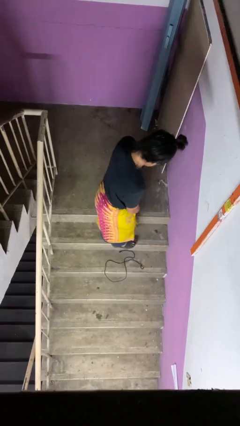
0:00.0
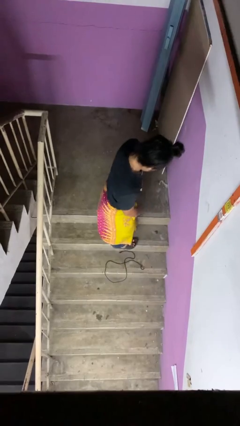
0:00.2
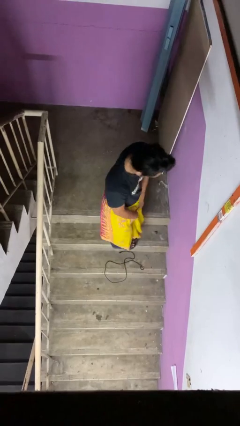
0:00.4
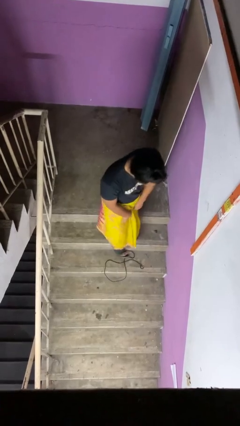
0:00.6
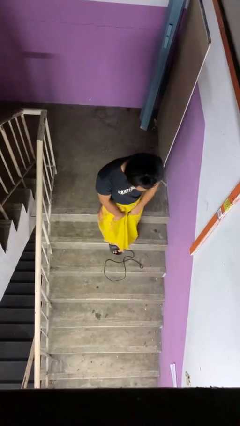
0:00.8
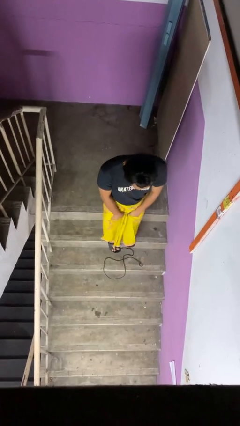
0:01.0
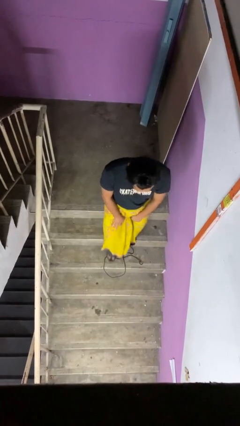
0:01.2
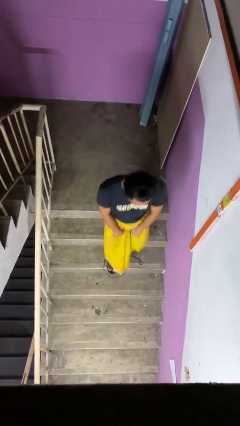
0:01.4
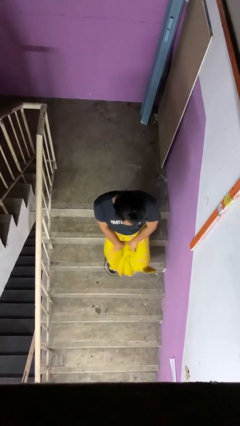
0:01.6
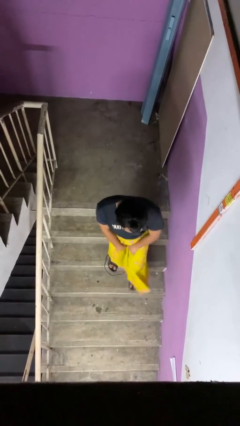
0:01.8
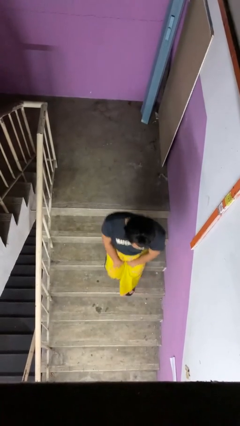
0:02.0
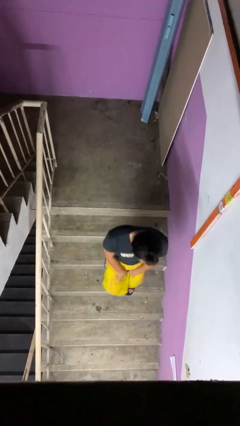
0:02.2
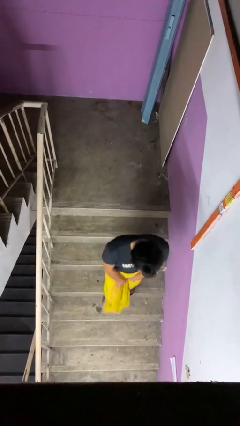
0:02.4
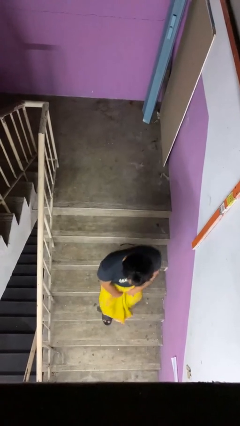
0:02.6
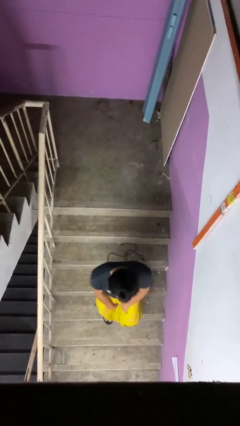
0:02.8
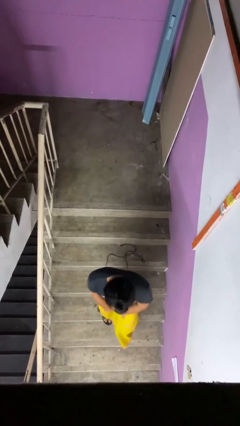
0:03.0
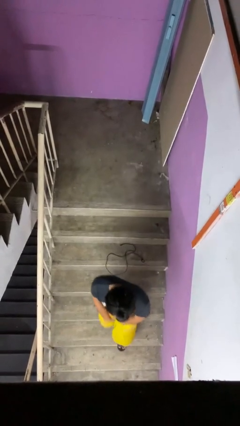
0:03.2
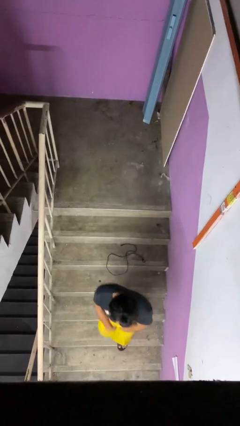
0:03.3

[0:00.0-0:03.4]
person climbs down stairs

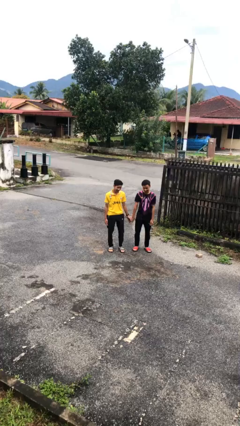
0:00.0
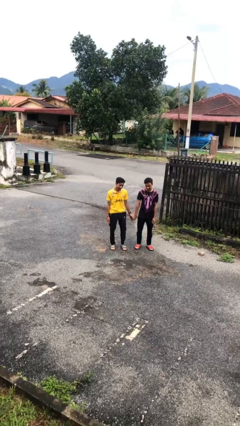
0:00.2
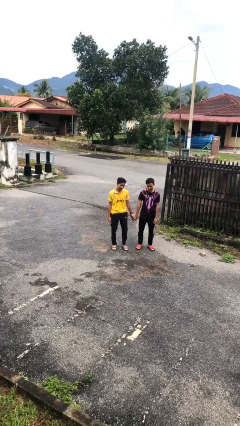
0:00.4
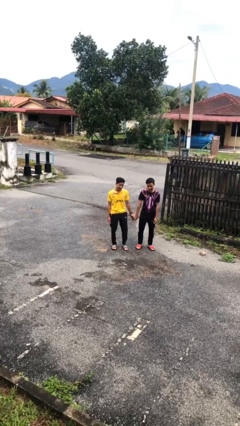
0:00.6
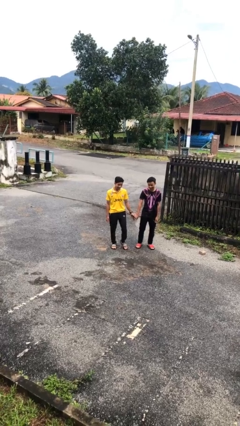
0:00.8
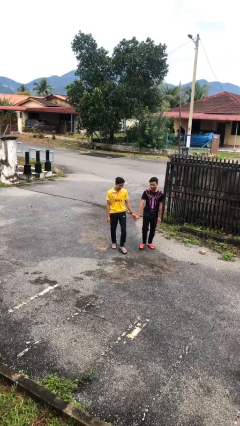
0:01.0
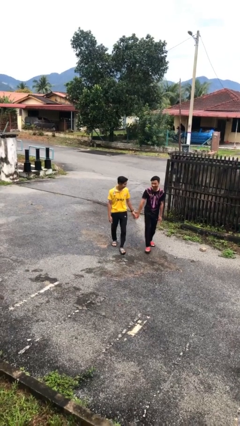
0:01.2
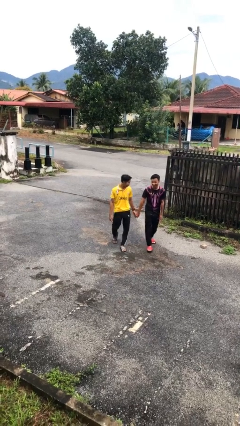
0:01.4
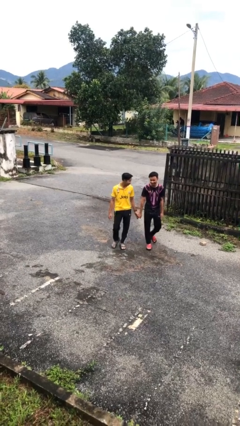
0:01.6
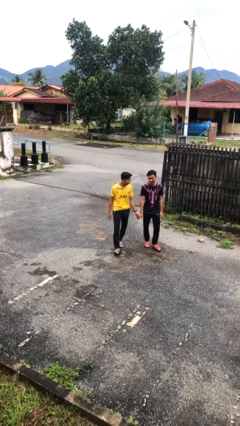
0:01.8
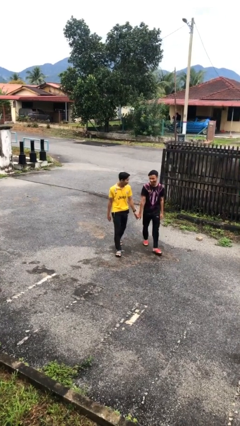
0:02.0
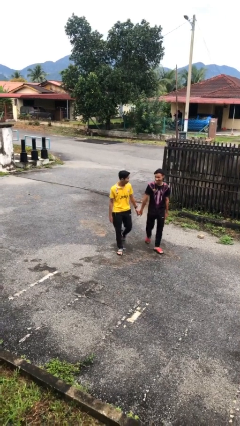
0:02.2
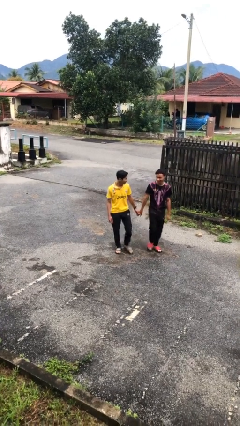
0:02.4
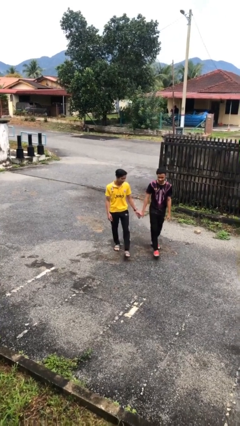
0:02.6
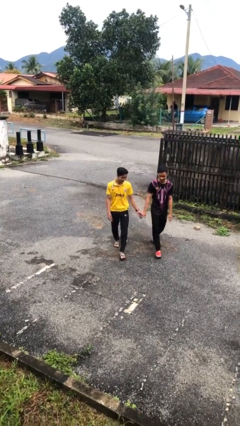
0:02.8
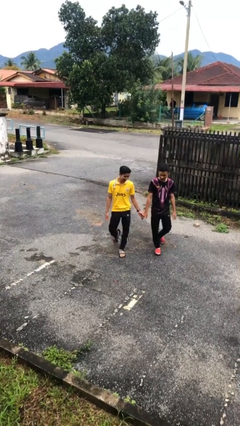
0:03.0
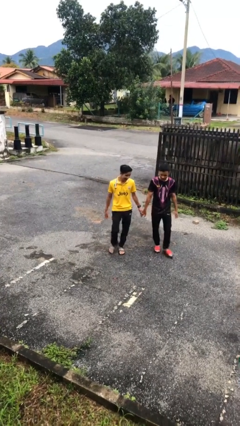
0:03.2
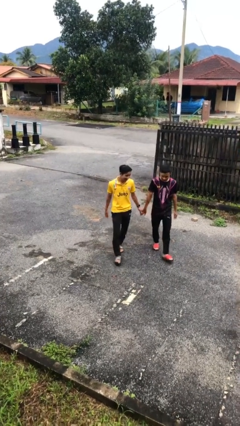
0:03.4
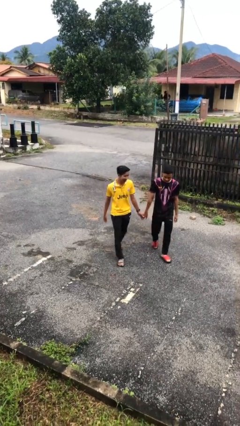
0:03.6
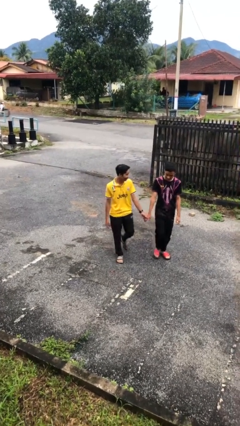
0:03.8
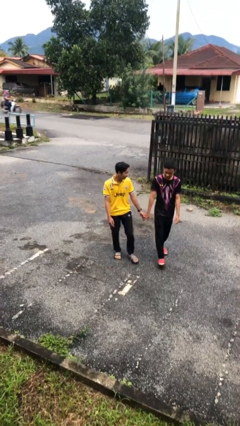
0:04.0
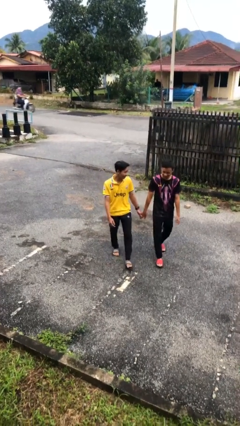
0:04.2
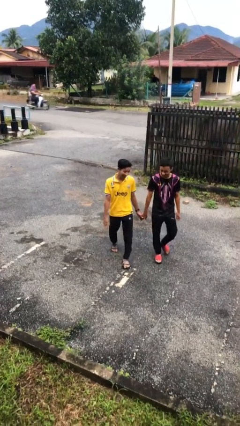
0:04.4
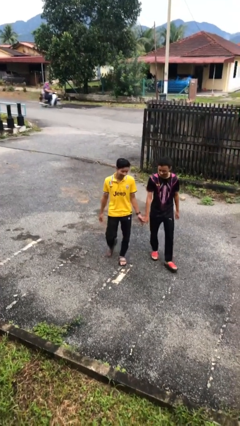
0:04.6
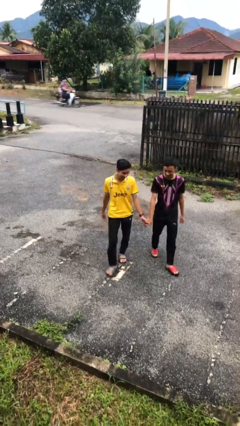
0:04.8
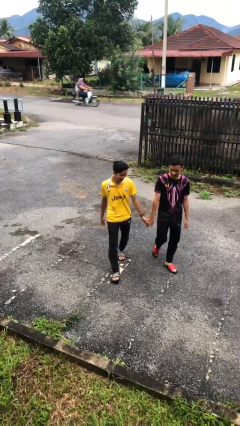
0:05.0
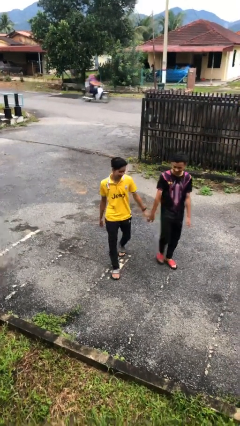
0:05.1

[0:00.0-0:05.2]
person holds hand

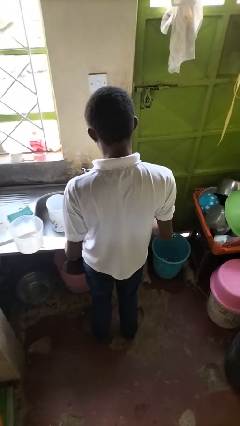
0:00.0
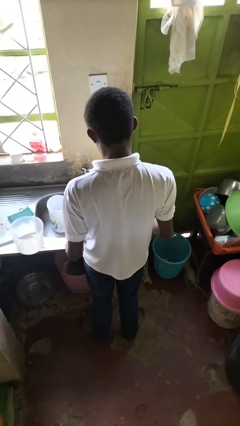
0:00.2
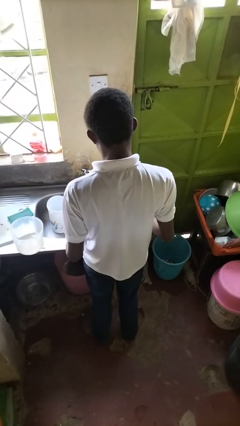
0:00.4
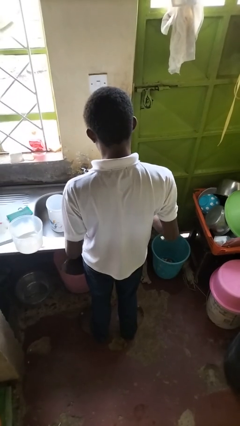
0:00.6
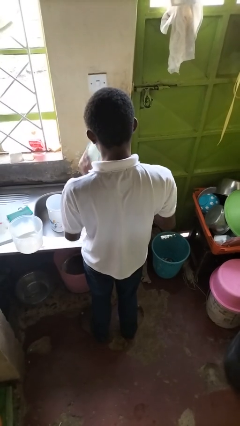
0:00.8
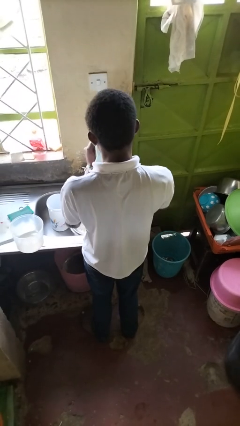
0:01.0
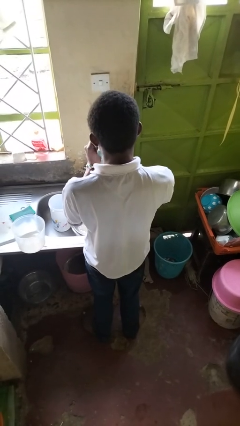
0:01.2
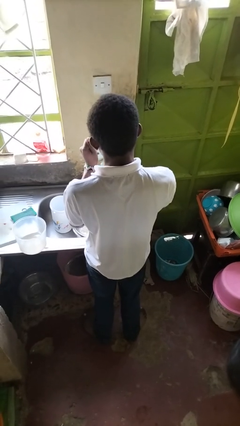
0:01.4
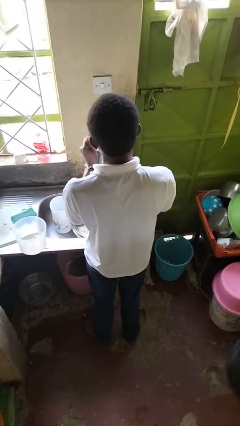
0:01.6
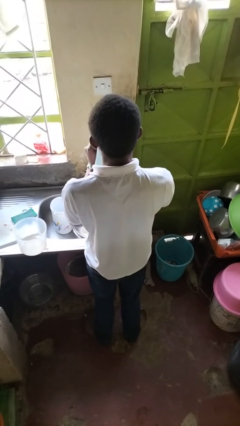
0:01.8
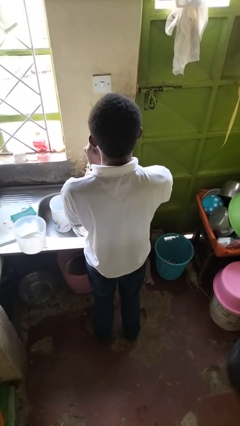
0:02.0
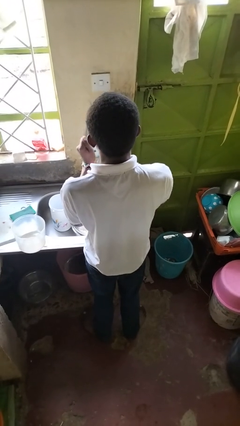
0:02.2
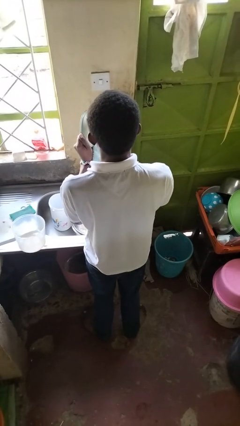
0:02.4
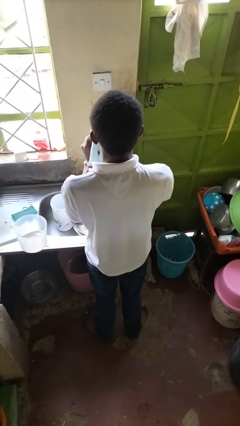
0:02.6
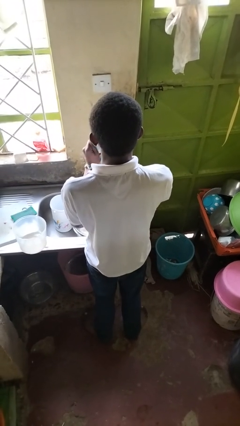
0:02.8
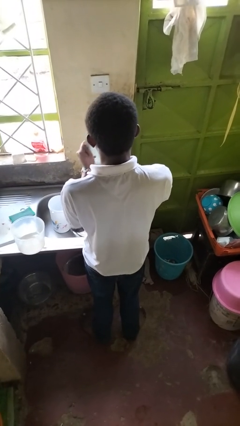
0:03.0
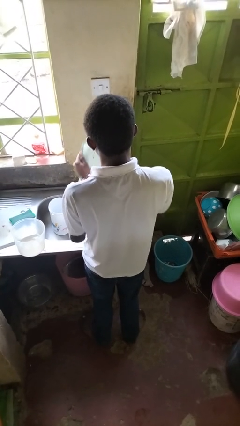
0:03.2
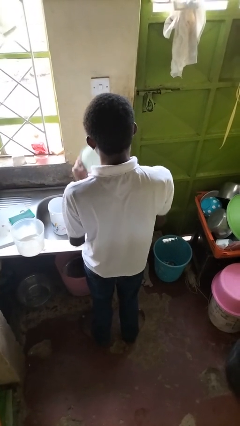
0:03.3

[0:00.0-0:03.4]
person dries dish

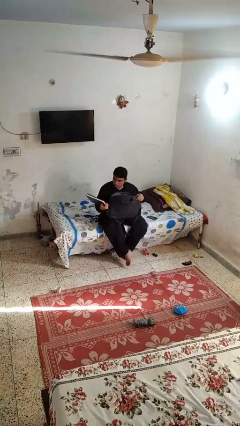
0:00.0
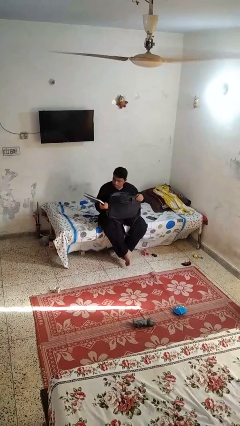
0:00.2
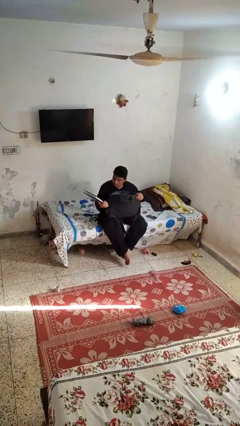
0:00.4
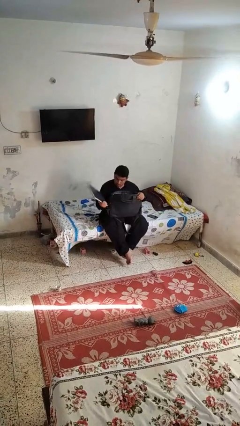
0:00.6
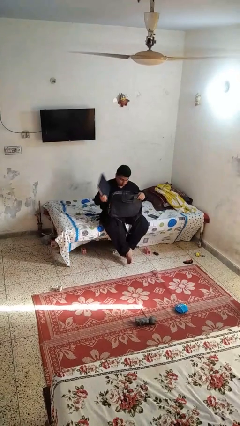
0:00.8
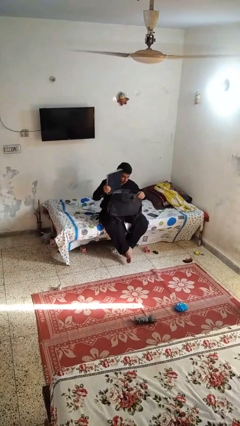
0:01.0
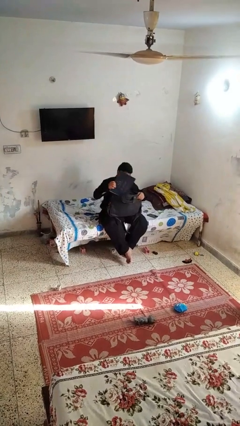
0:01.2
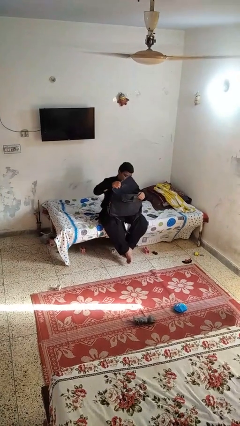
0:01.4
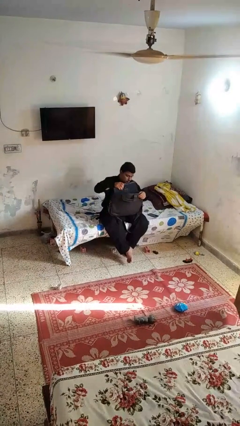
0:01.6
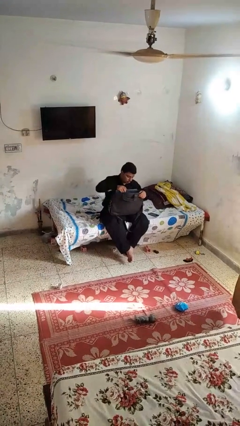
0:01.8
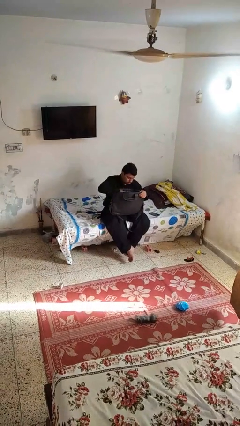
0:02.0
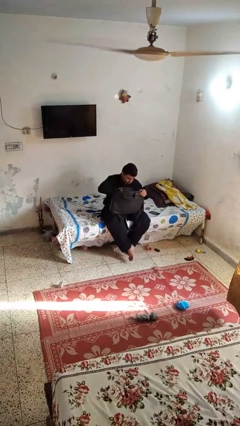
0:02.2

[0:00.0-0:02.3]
person puts object into backpack

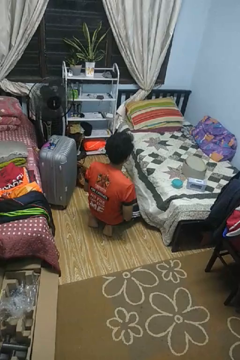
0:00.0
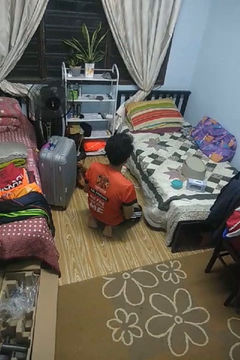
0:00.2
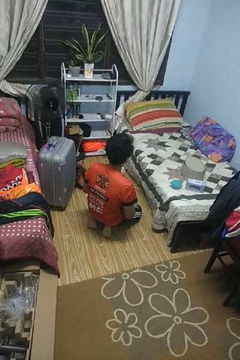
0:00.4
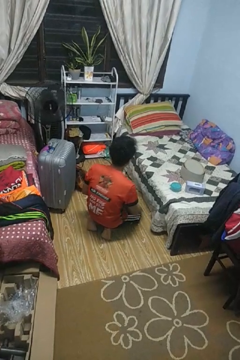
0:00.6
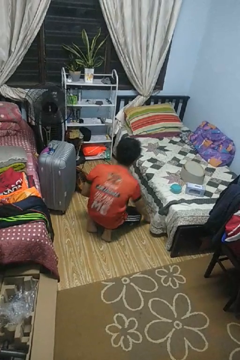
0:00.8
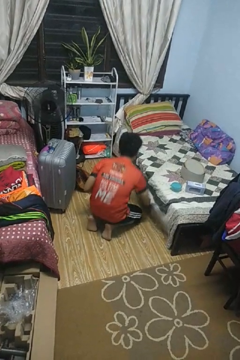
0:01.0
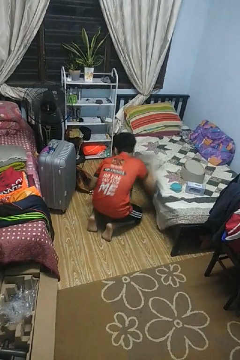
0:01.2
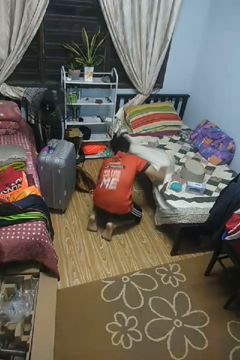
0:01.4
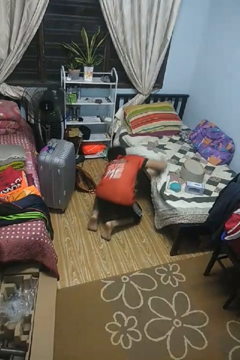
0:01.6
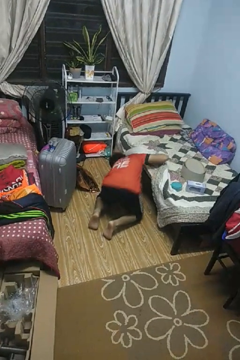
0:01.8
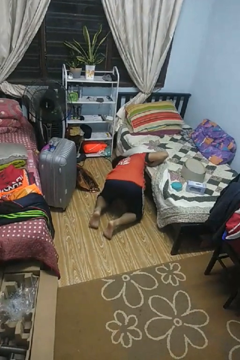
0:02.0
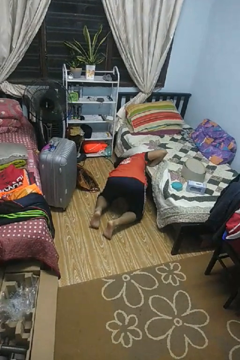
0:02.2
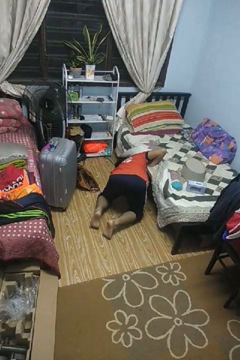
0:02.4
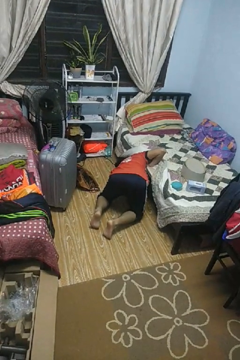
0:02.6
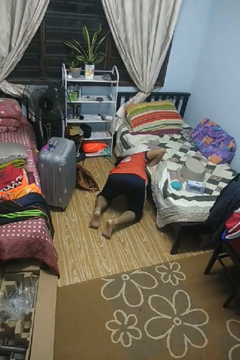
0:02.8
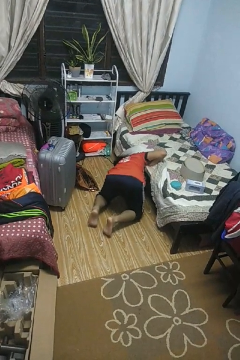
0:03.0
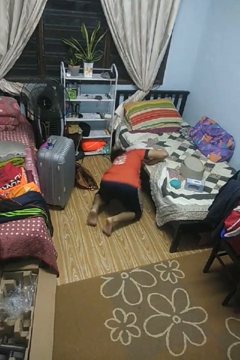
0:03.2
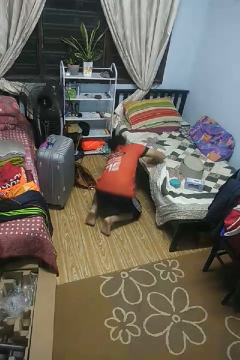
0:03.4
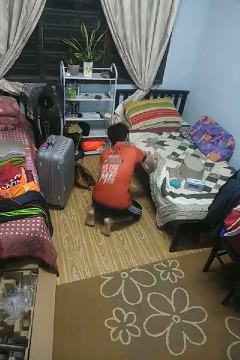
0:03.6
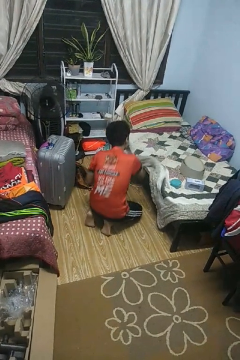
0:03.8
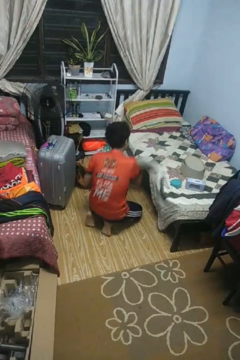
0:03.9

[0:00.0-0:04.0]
person searches under bed

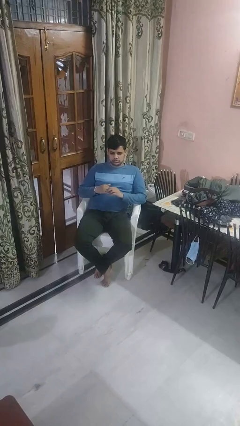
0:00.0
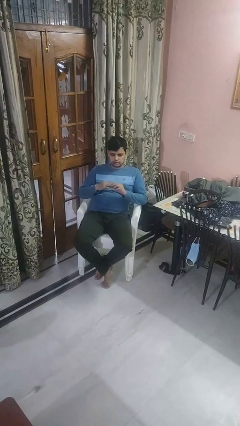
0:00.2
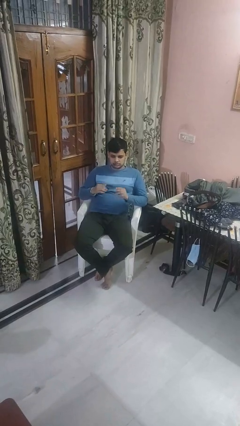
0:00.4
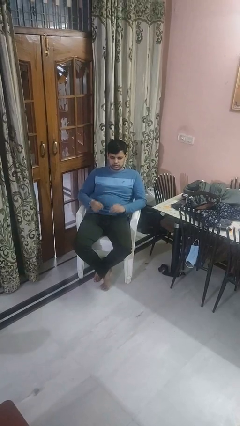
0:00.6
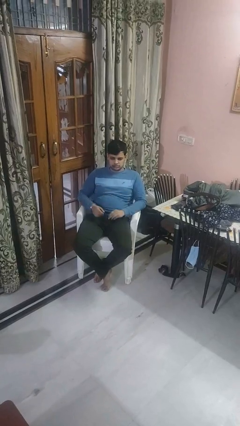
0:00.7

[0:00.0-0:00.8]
person takes off ring
